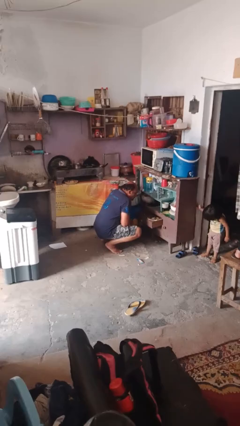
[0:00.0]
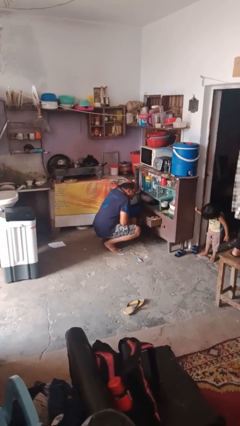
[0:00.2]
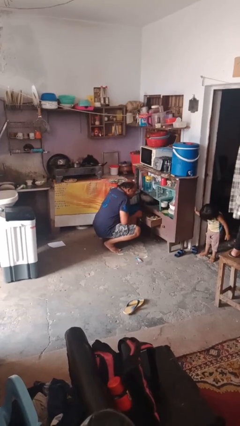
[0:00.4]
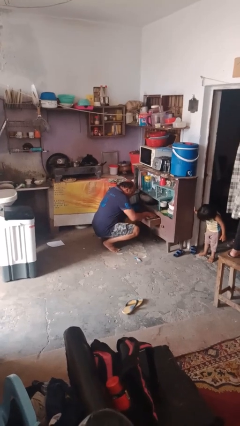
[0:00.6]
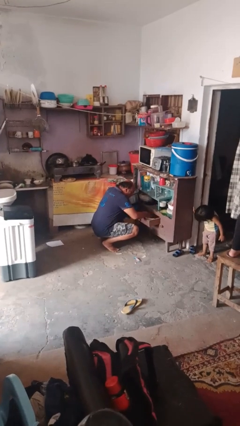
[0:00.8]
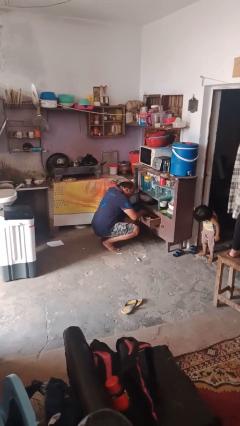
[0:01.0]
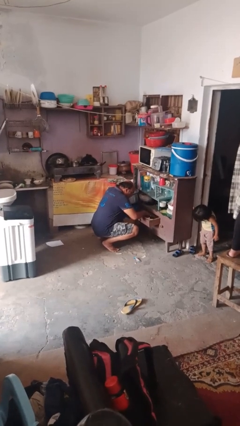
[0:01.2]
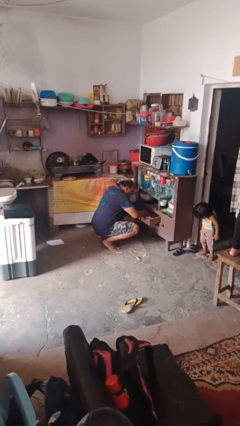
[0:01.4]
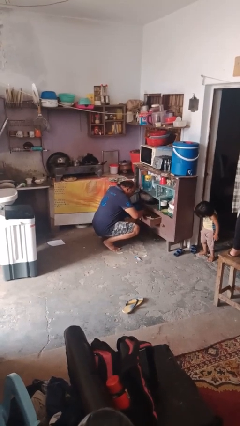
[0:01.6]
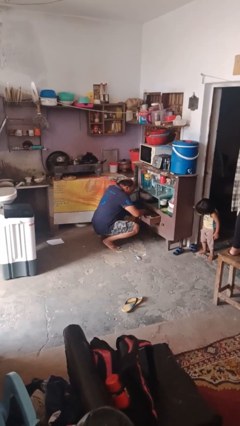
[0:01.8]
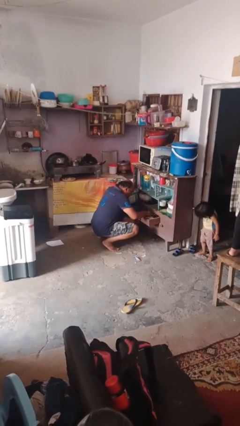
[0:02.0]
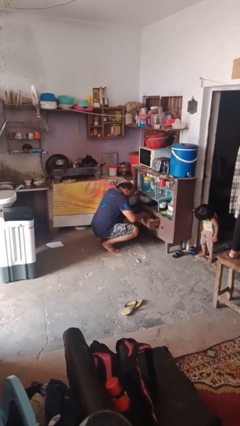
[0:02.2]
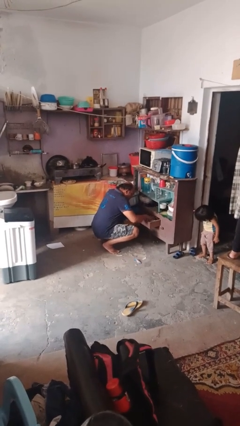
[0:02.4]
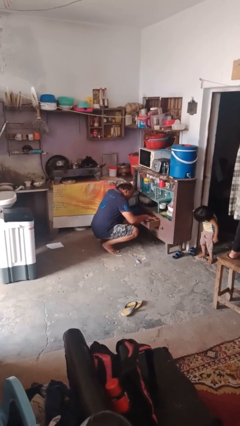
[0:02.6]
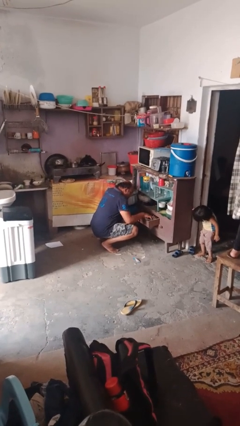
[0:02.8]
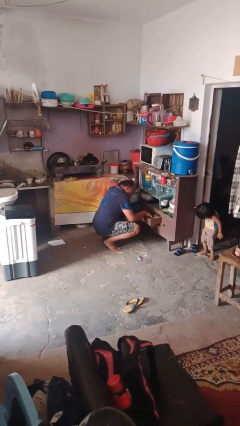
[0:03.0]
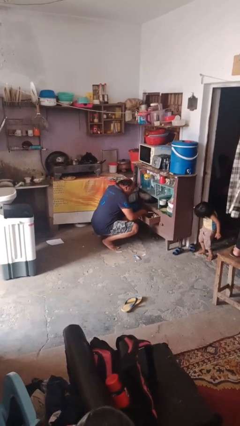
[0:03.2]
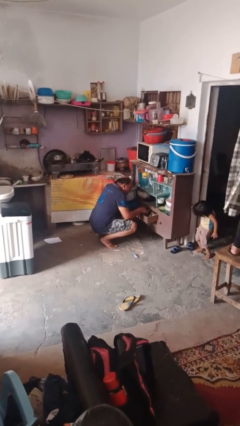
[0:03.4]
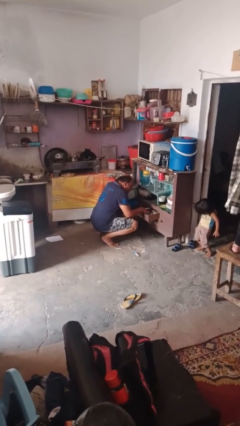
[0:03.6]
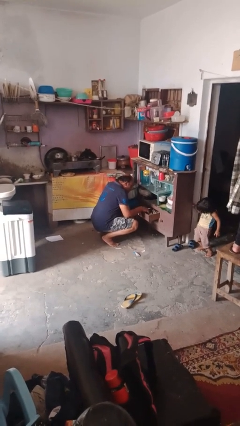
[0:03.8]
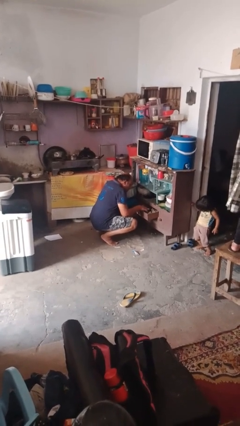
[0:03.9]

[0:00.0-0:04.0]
person searches in kitchen drawer

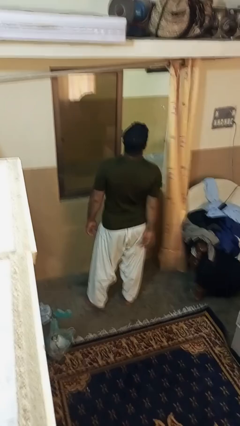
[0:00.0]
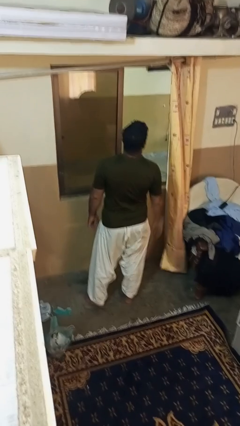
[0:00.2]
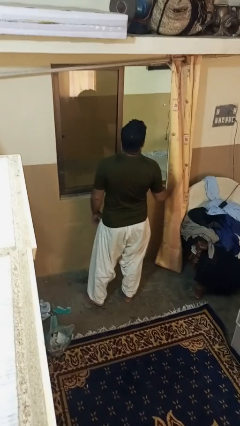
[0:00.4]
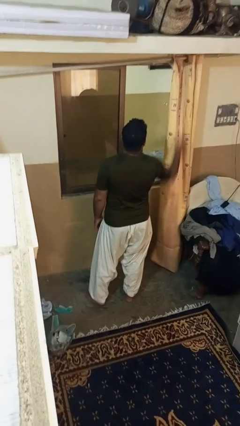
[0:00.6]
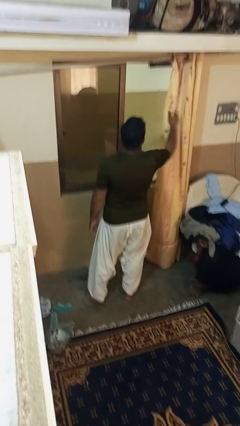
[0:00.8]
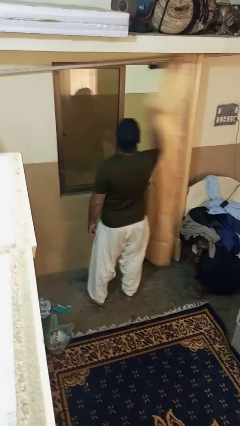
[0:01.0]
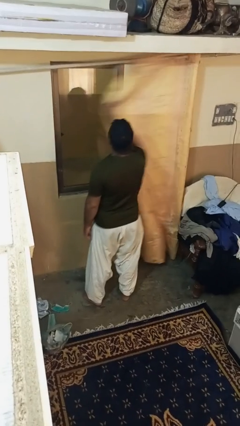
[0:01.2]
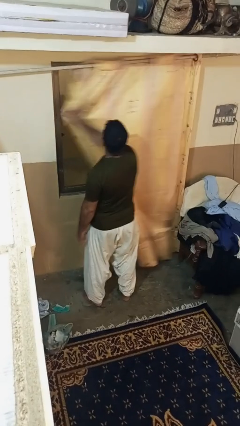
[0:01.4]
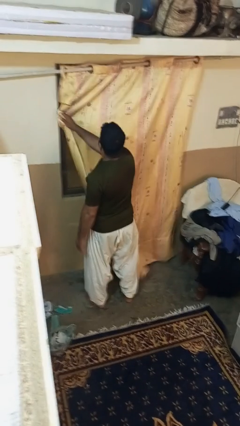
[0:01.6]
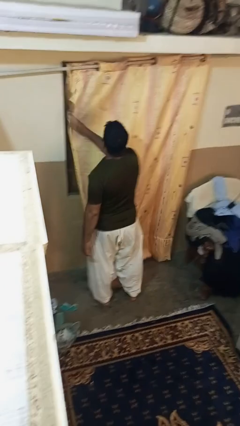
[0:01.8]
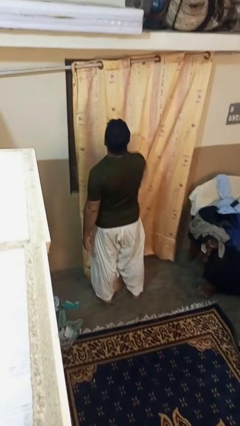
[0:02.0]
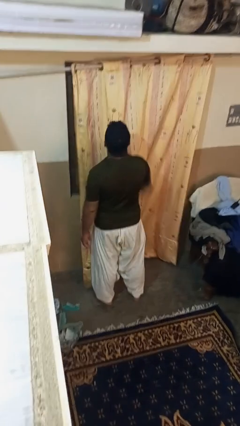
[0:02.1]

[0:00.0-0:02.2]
person closes curtains

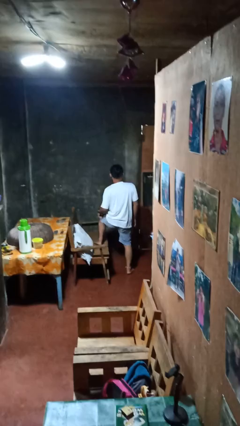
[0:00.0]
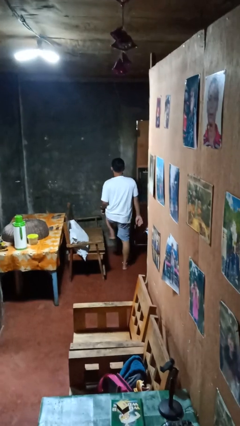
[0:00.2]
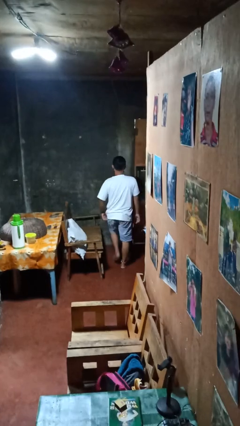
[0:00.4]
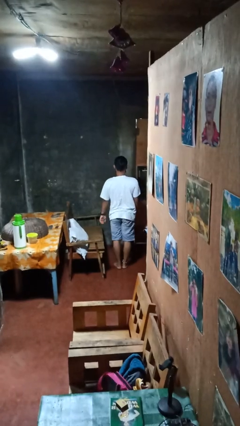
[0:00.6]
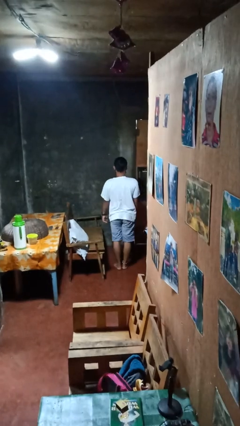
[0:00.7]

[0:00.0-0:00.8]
person climbs off couch

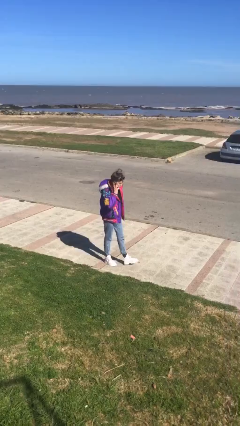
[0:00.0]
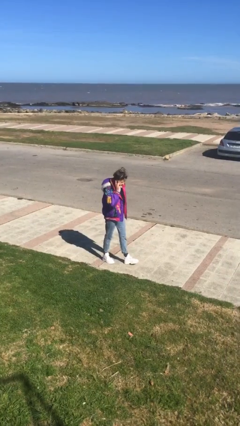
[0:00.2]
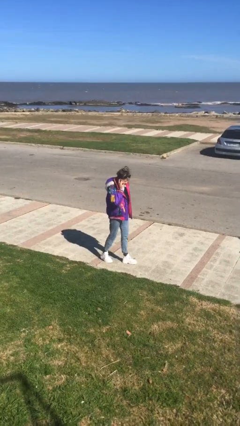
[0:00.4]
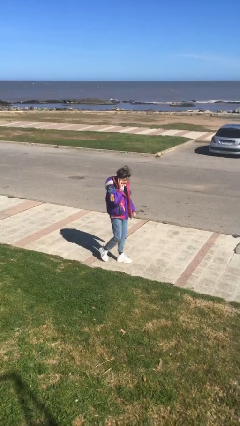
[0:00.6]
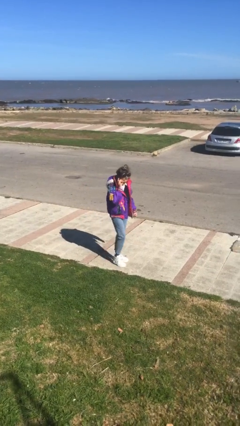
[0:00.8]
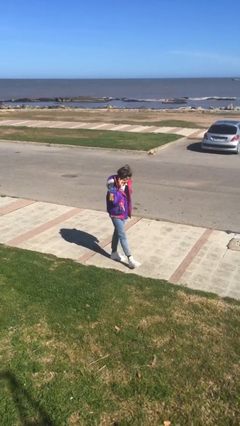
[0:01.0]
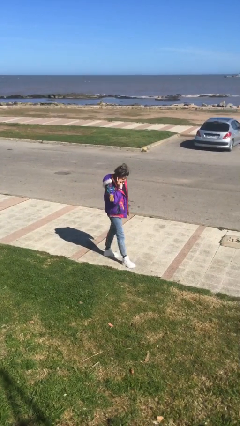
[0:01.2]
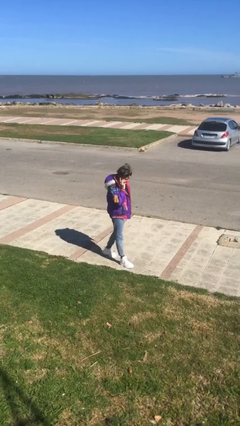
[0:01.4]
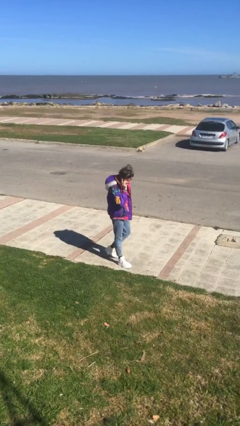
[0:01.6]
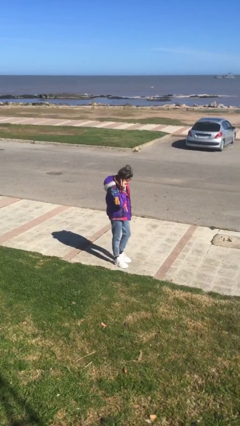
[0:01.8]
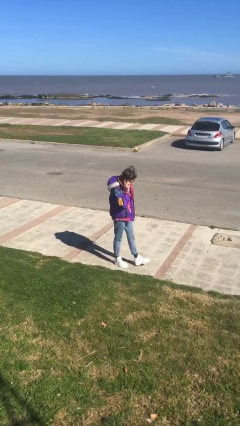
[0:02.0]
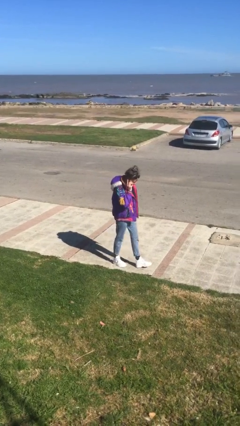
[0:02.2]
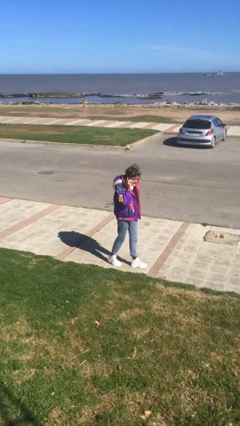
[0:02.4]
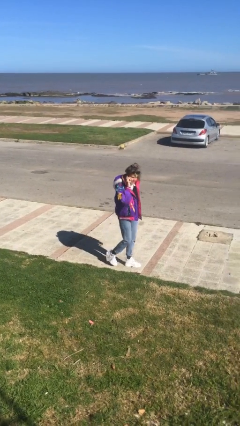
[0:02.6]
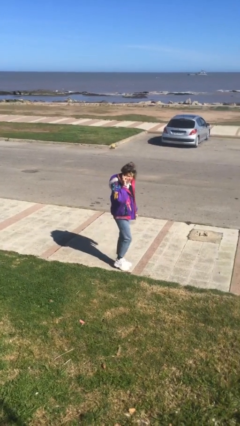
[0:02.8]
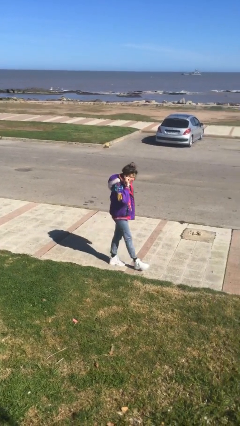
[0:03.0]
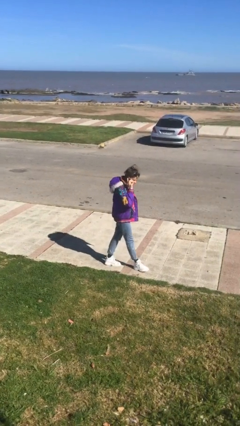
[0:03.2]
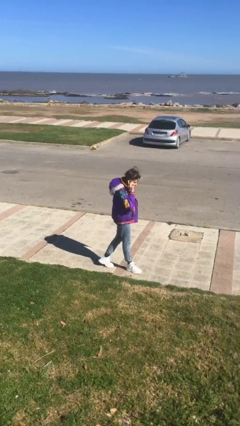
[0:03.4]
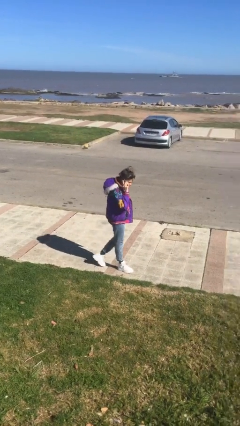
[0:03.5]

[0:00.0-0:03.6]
person talks on phone

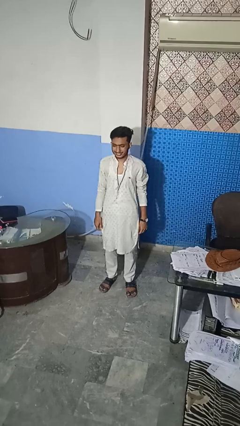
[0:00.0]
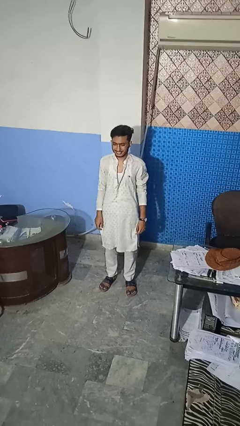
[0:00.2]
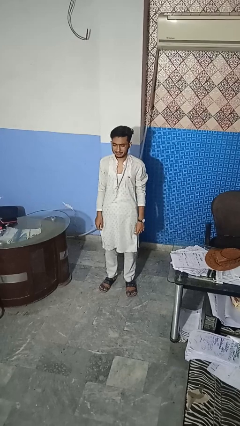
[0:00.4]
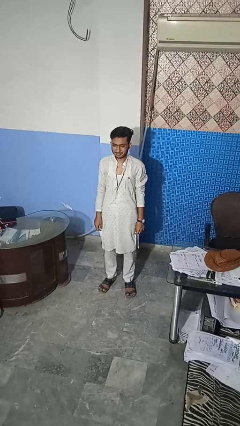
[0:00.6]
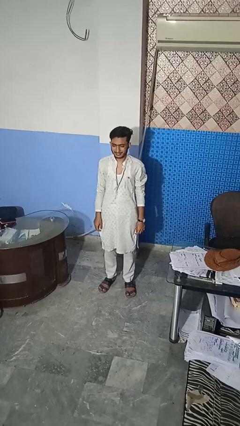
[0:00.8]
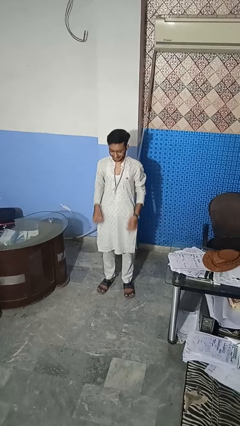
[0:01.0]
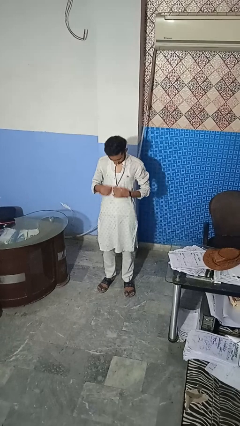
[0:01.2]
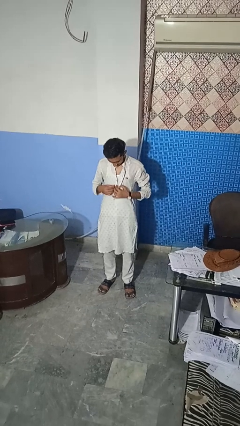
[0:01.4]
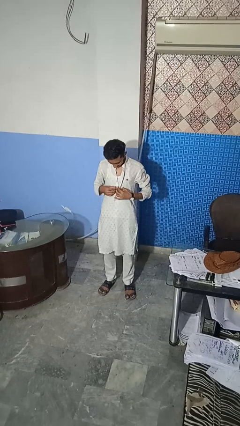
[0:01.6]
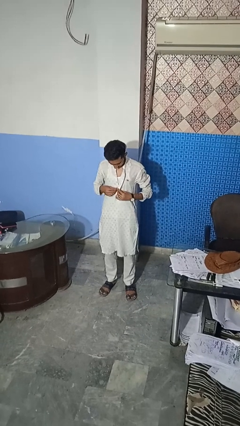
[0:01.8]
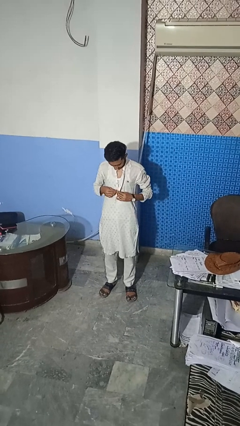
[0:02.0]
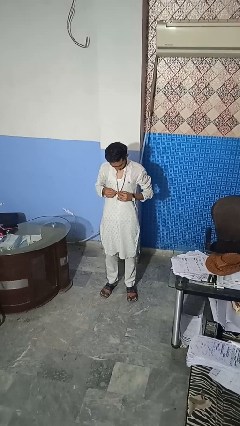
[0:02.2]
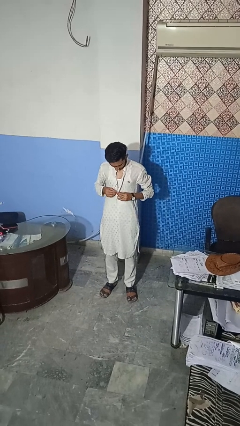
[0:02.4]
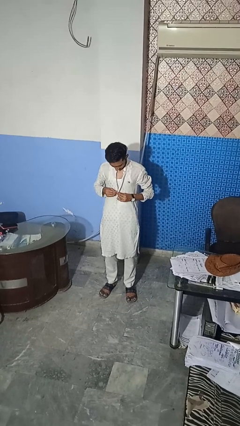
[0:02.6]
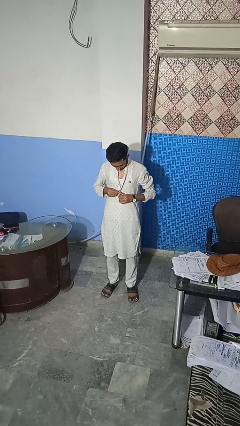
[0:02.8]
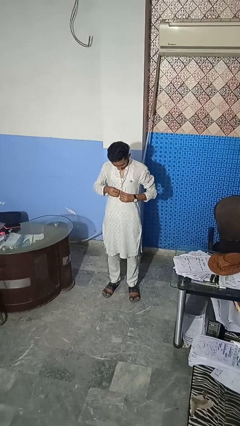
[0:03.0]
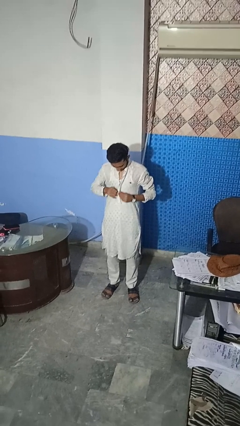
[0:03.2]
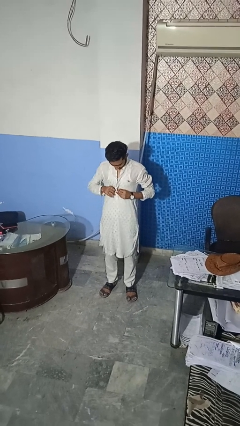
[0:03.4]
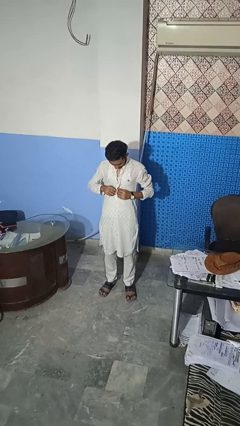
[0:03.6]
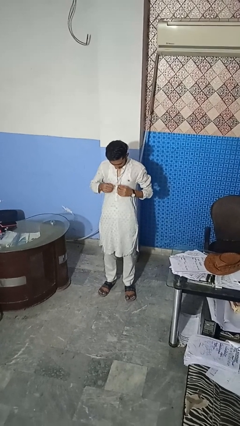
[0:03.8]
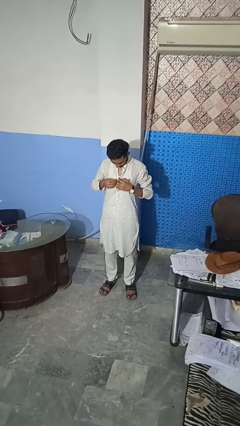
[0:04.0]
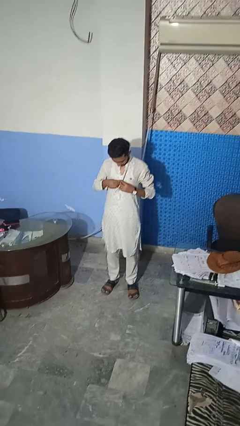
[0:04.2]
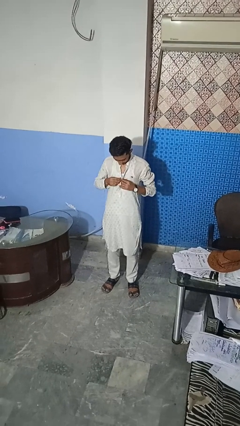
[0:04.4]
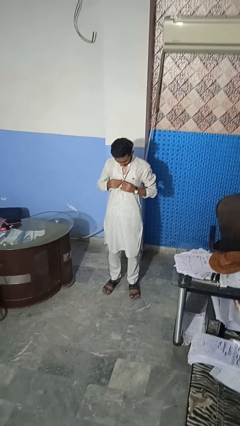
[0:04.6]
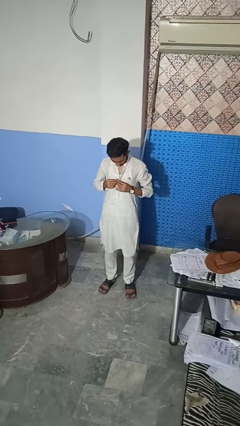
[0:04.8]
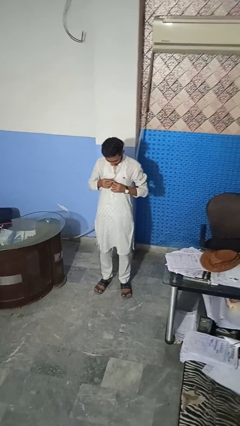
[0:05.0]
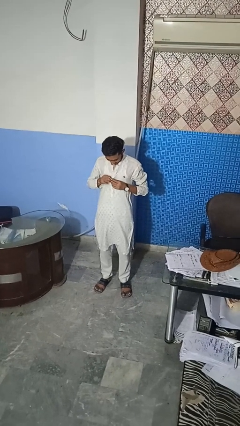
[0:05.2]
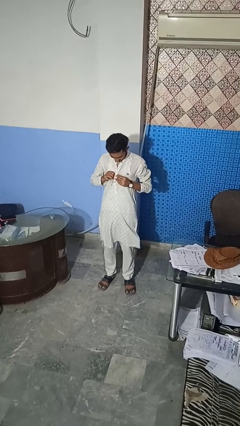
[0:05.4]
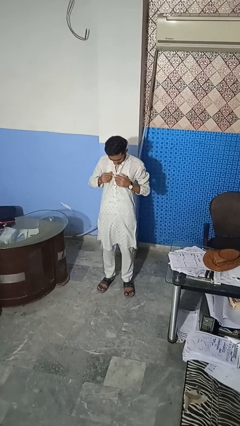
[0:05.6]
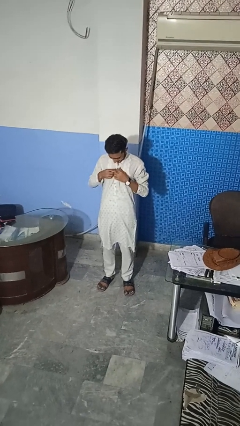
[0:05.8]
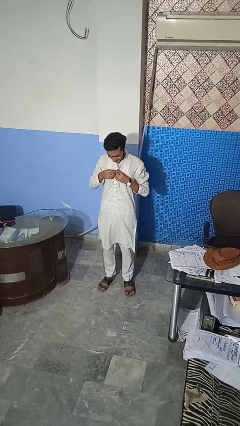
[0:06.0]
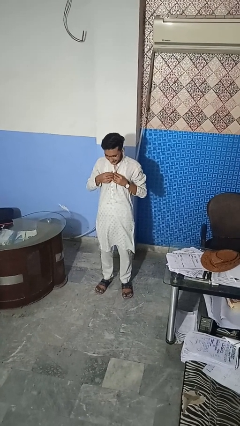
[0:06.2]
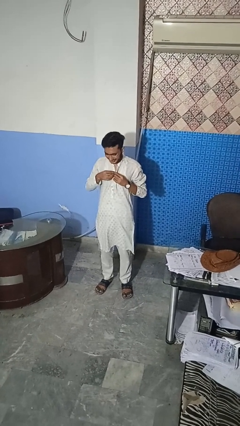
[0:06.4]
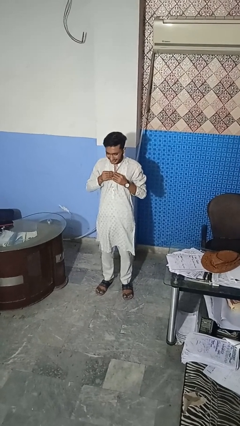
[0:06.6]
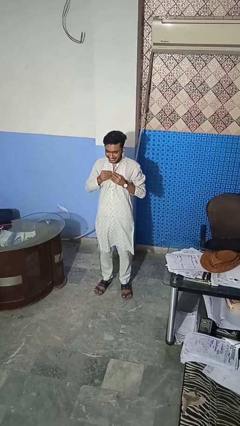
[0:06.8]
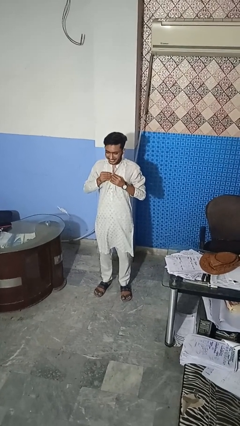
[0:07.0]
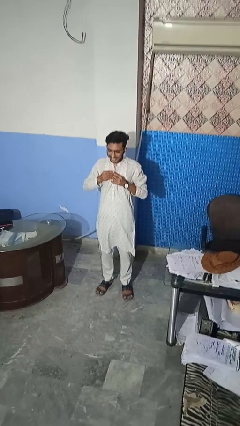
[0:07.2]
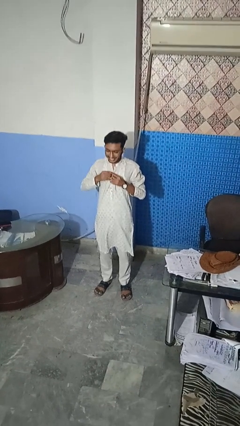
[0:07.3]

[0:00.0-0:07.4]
person buttons shirt
